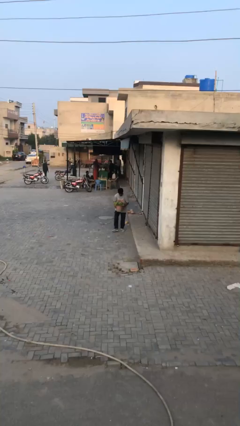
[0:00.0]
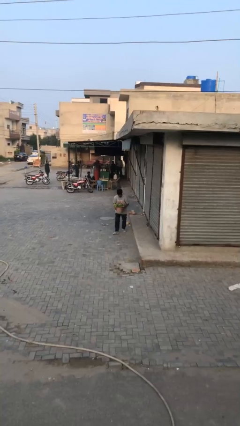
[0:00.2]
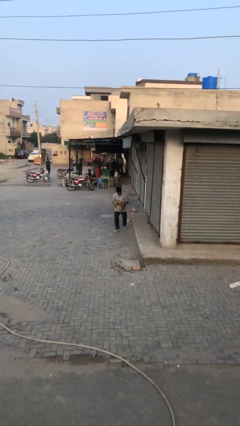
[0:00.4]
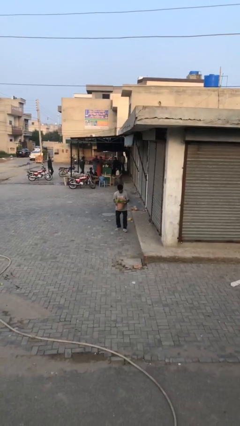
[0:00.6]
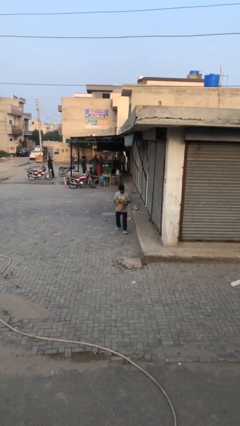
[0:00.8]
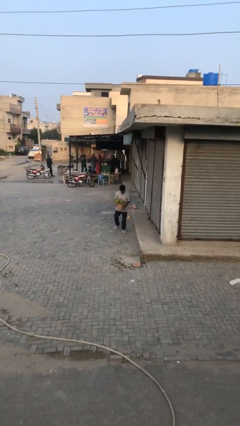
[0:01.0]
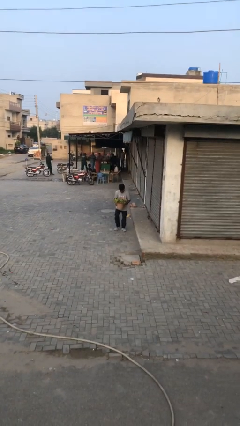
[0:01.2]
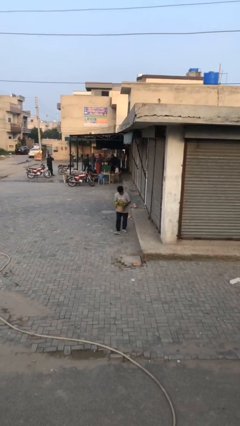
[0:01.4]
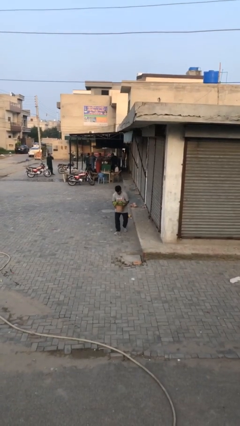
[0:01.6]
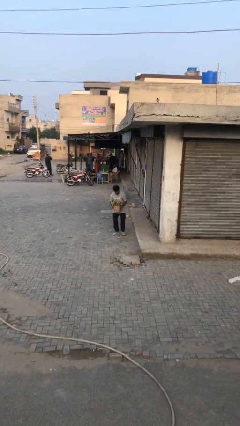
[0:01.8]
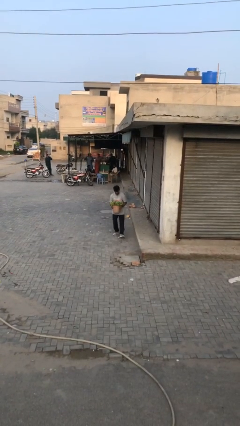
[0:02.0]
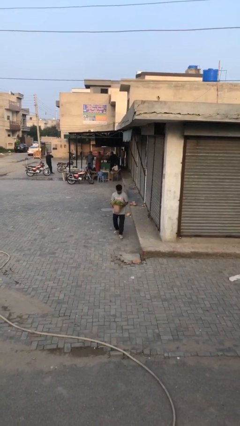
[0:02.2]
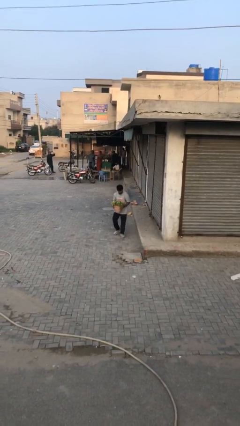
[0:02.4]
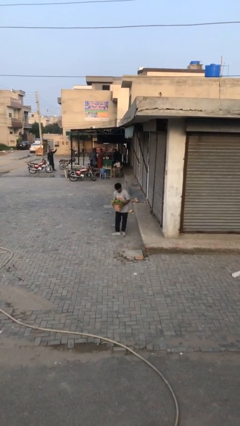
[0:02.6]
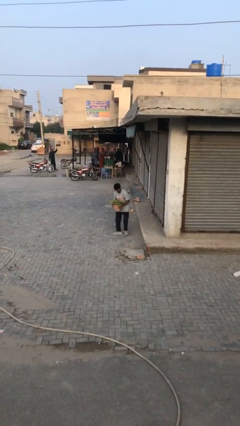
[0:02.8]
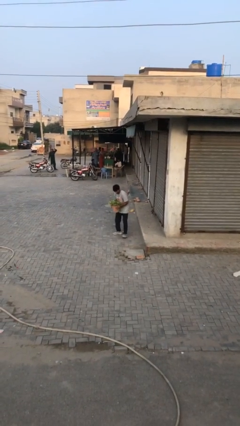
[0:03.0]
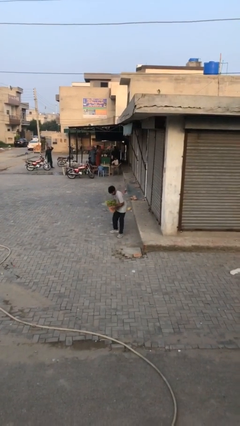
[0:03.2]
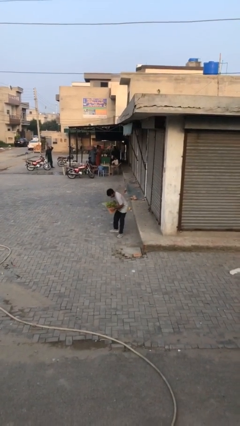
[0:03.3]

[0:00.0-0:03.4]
person carries heavy object

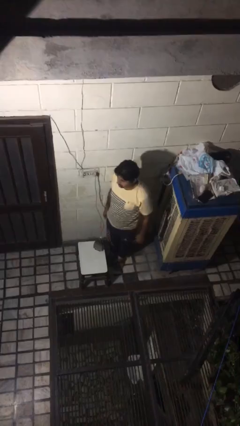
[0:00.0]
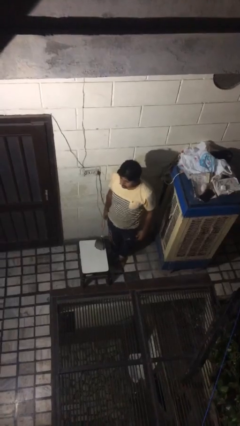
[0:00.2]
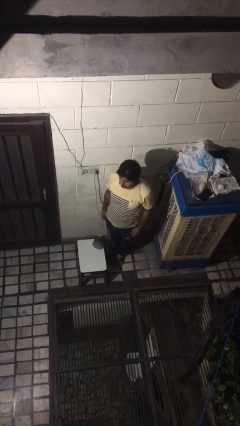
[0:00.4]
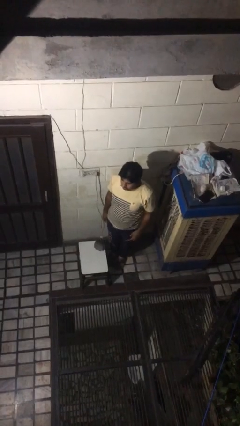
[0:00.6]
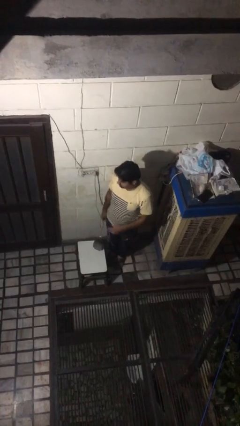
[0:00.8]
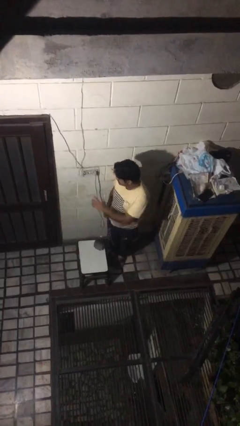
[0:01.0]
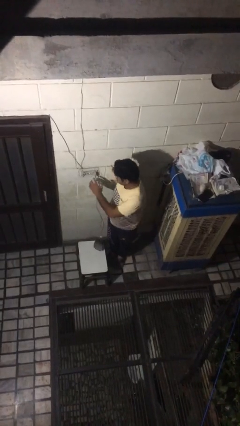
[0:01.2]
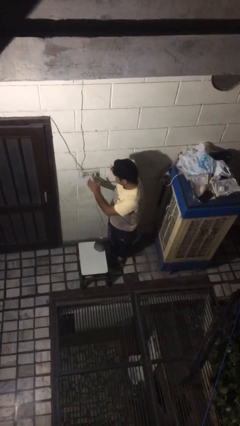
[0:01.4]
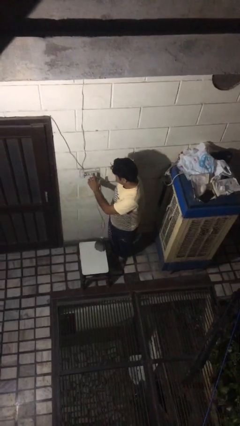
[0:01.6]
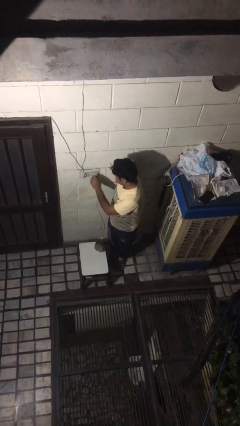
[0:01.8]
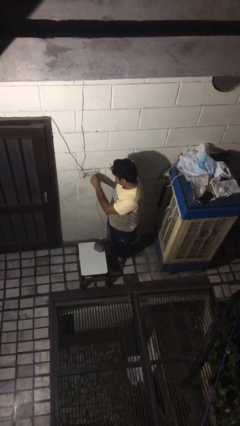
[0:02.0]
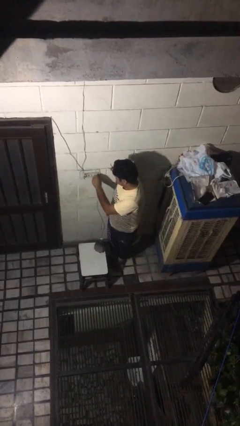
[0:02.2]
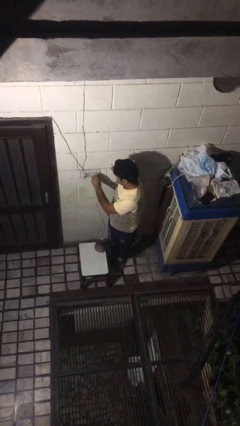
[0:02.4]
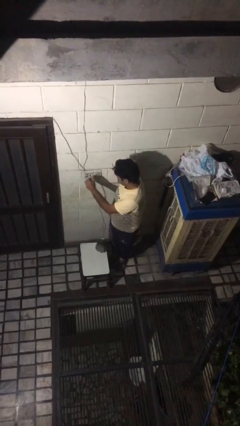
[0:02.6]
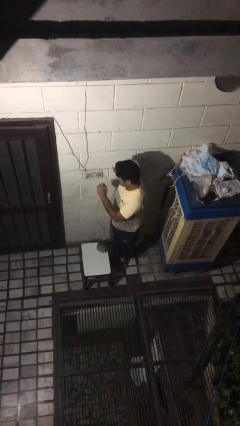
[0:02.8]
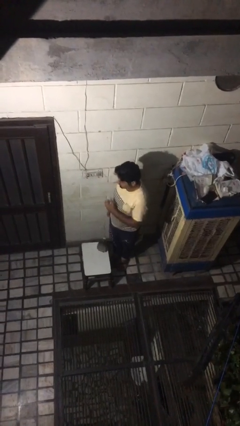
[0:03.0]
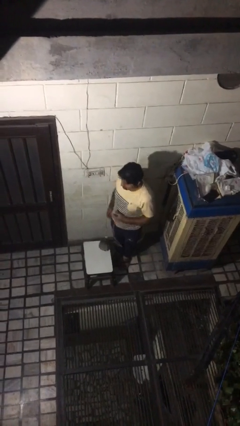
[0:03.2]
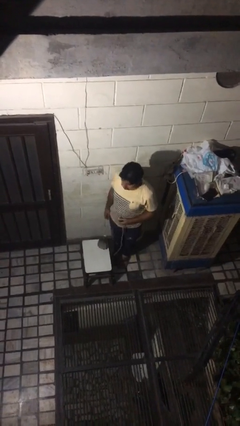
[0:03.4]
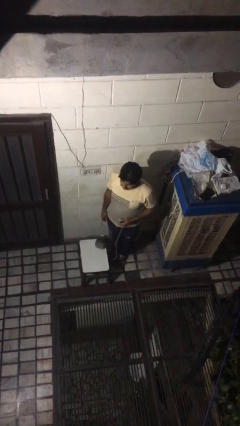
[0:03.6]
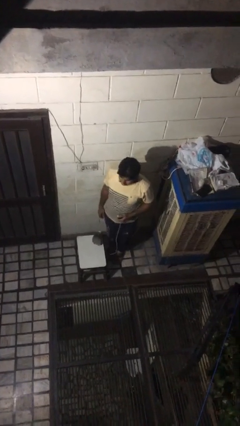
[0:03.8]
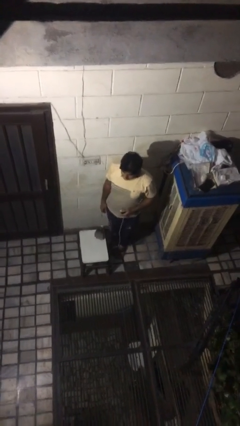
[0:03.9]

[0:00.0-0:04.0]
person unplugs from electrical socket

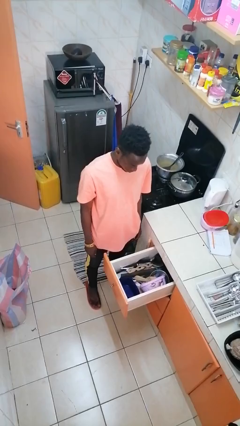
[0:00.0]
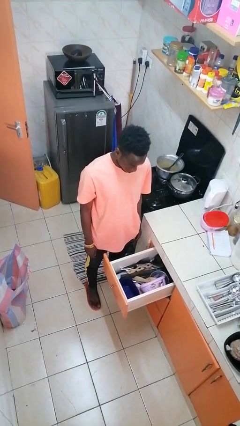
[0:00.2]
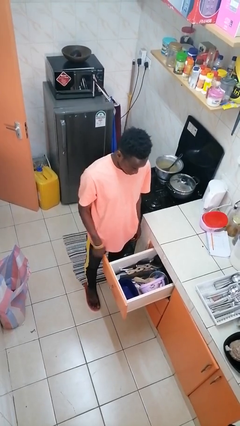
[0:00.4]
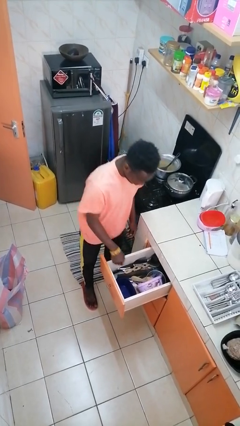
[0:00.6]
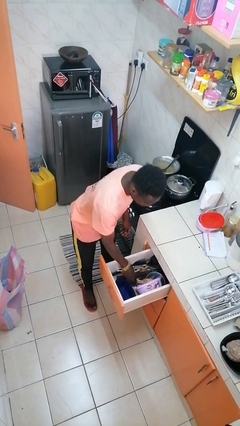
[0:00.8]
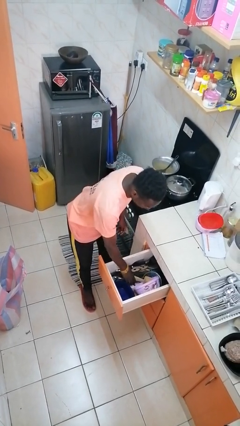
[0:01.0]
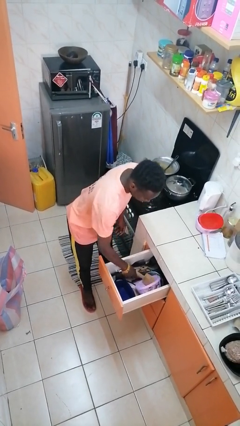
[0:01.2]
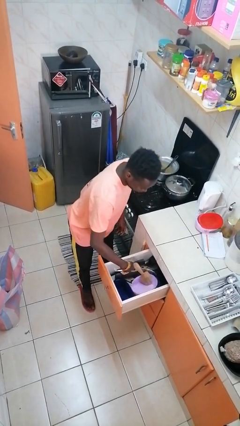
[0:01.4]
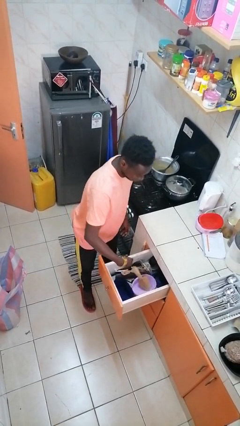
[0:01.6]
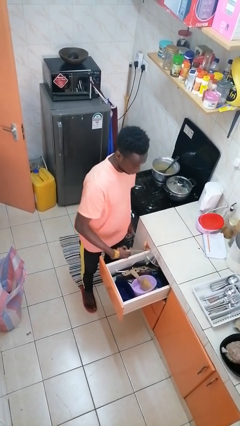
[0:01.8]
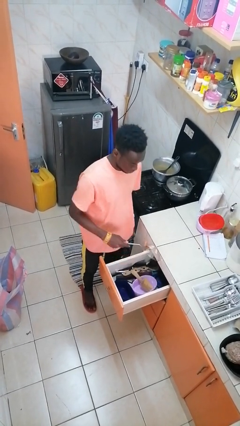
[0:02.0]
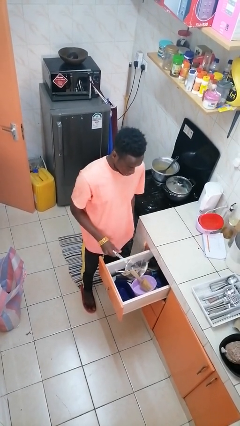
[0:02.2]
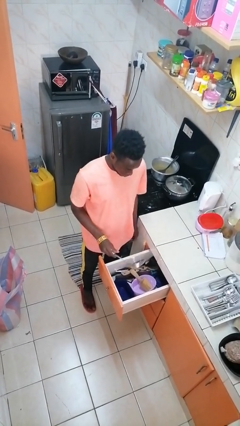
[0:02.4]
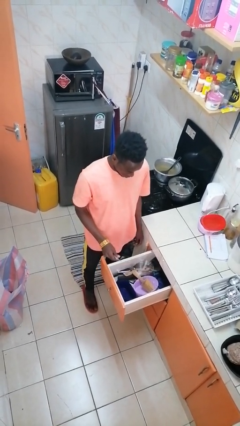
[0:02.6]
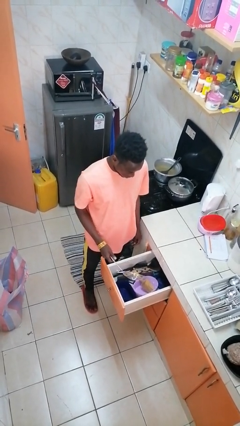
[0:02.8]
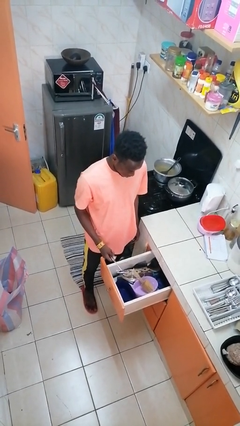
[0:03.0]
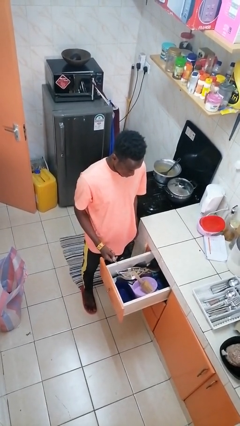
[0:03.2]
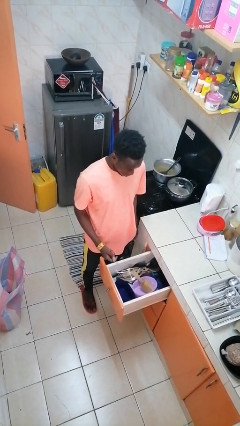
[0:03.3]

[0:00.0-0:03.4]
person takes object from kitchen drawer

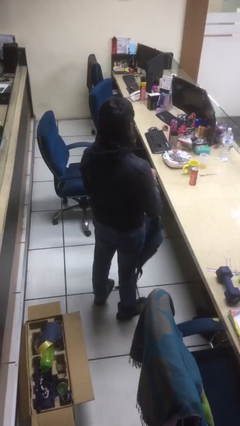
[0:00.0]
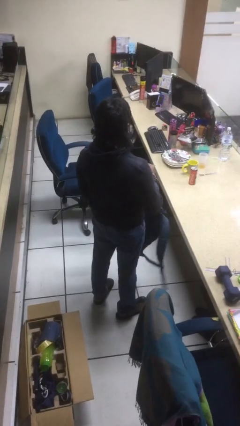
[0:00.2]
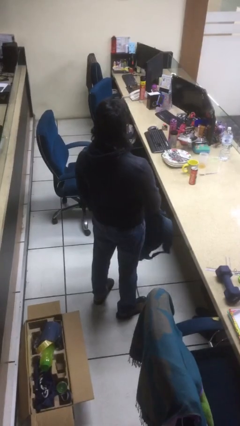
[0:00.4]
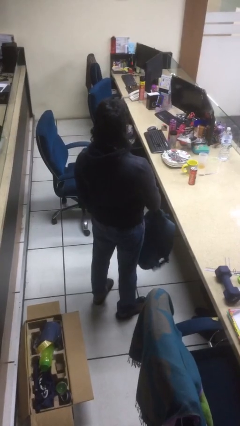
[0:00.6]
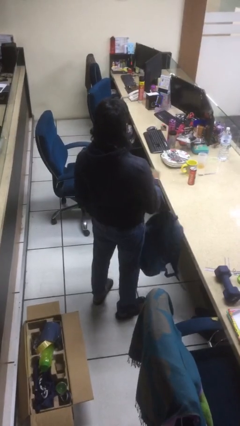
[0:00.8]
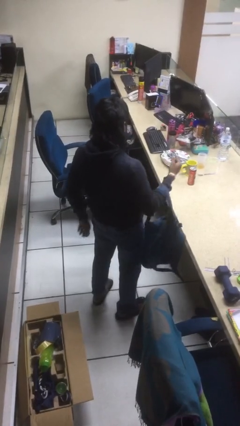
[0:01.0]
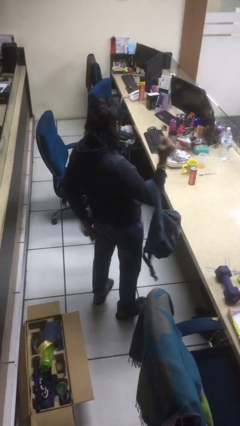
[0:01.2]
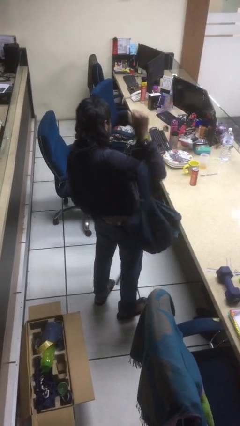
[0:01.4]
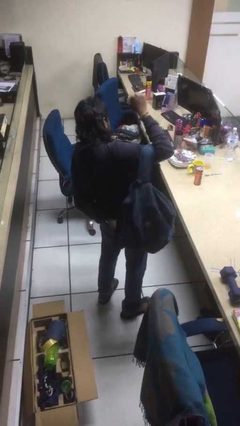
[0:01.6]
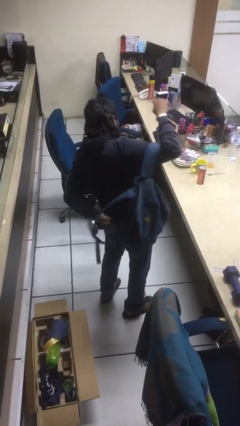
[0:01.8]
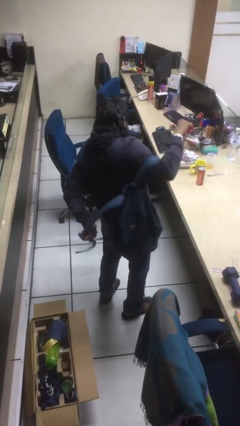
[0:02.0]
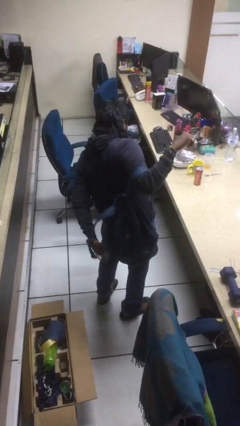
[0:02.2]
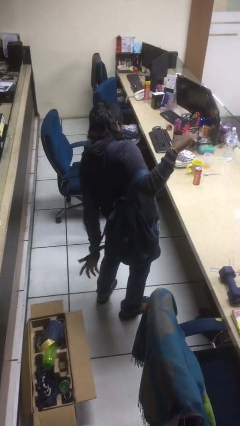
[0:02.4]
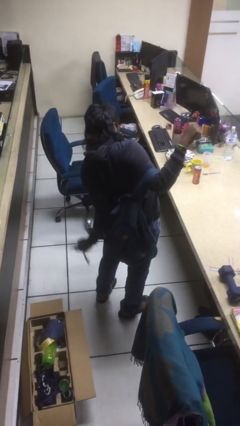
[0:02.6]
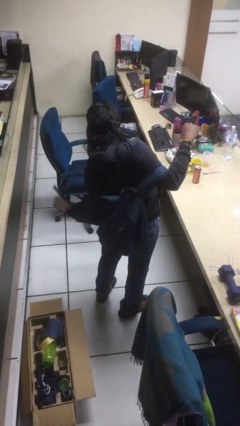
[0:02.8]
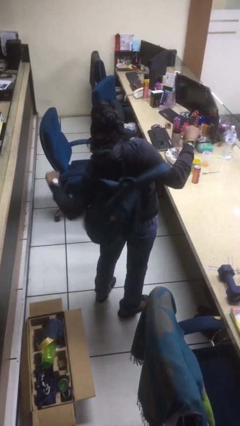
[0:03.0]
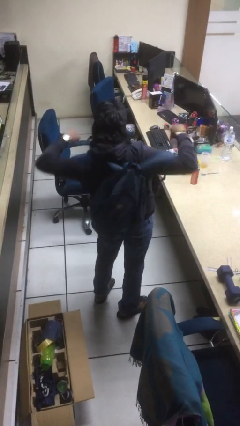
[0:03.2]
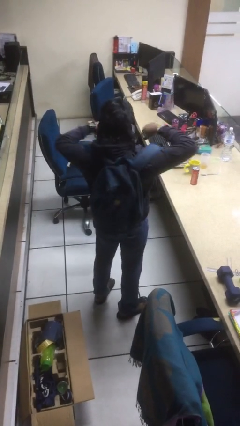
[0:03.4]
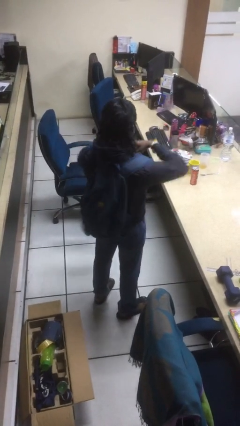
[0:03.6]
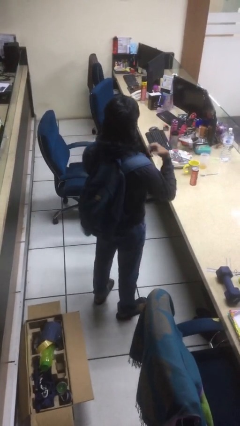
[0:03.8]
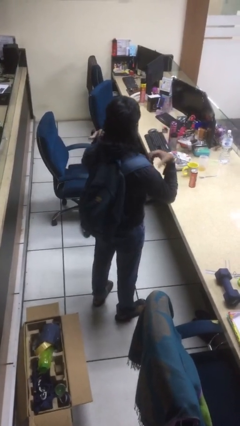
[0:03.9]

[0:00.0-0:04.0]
person puts on backpack

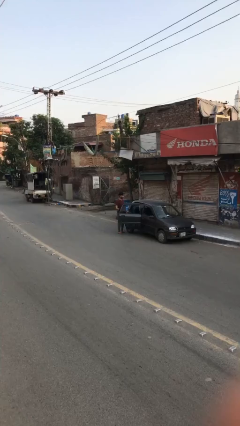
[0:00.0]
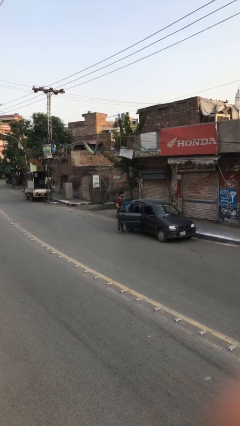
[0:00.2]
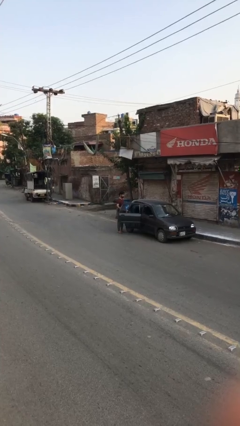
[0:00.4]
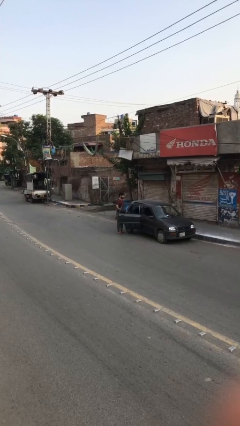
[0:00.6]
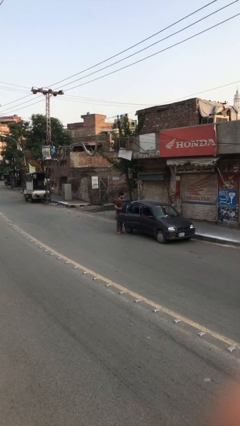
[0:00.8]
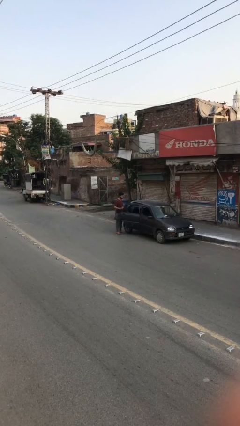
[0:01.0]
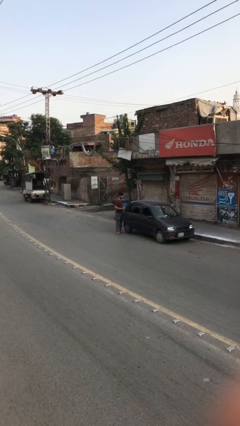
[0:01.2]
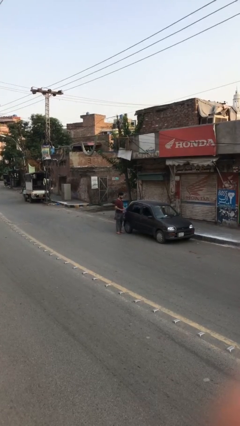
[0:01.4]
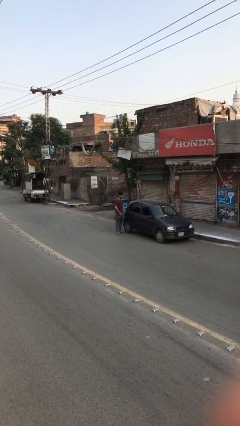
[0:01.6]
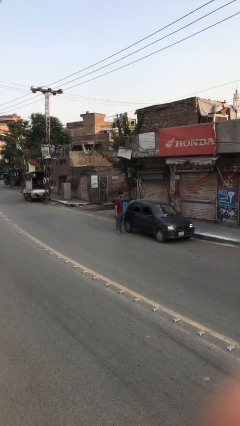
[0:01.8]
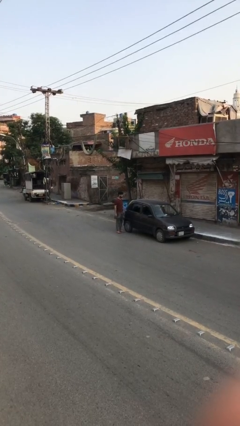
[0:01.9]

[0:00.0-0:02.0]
person closes car door

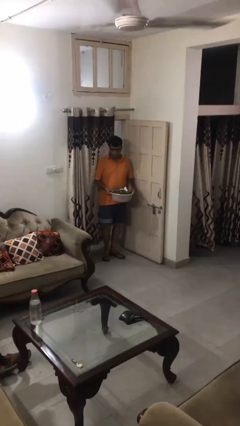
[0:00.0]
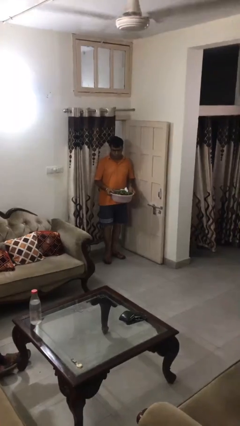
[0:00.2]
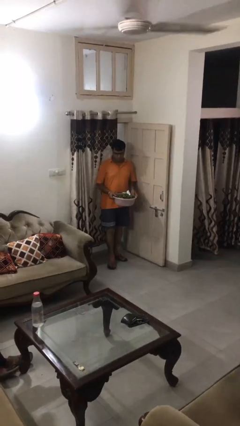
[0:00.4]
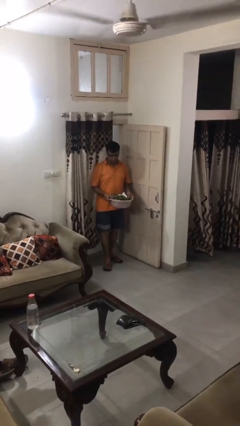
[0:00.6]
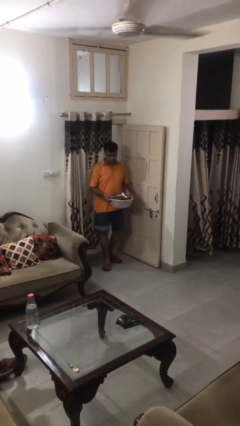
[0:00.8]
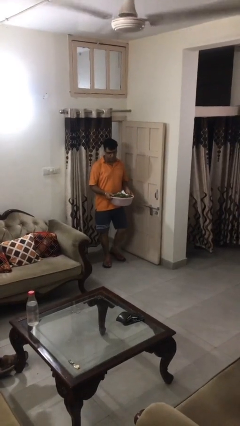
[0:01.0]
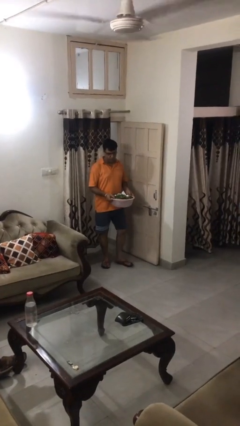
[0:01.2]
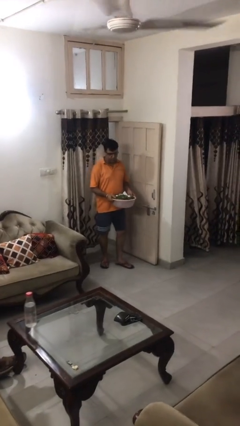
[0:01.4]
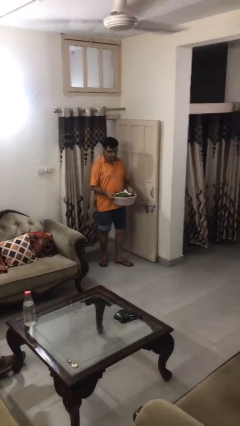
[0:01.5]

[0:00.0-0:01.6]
person carries groceries
